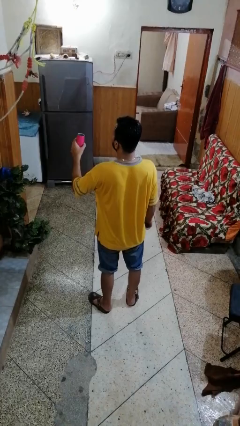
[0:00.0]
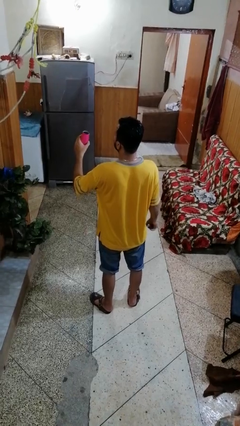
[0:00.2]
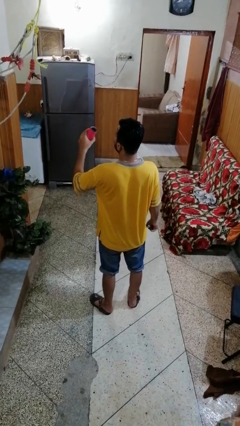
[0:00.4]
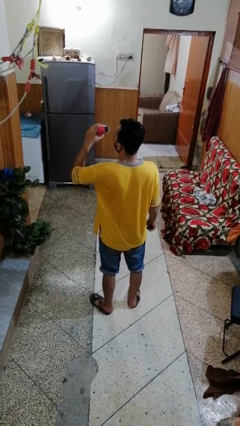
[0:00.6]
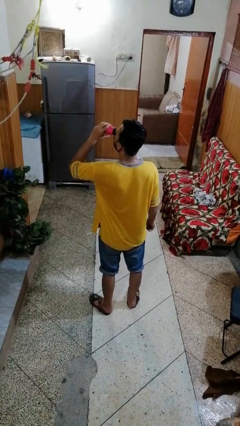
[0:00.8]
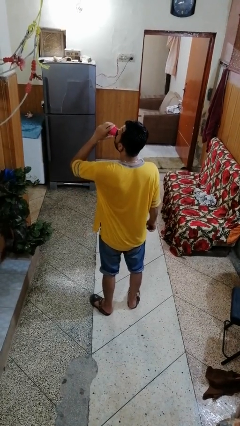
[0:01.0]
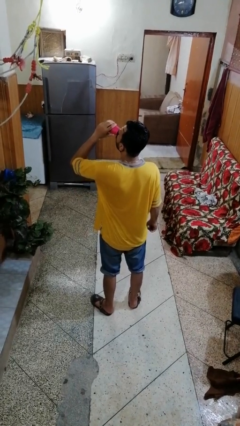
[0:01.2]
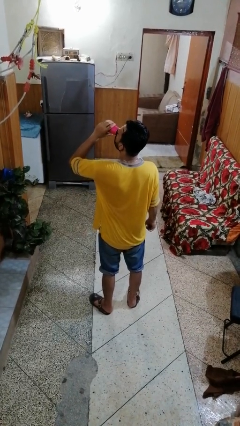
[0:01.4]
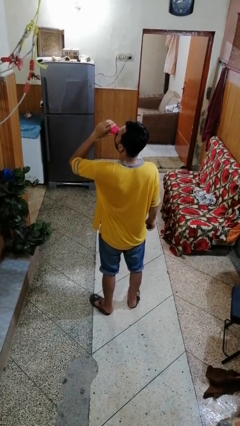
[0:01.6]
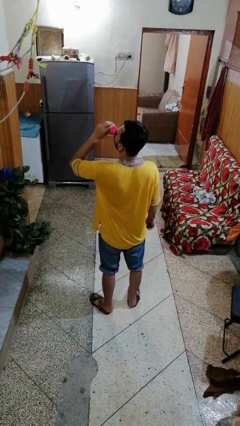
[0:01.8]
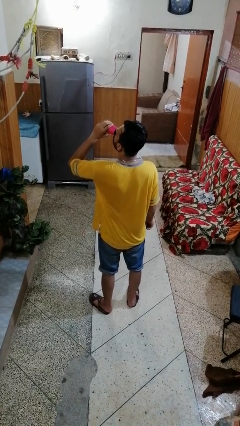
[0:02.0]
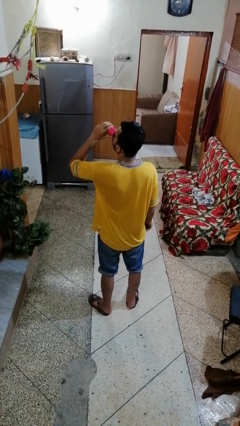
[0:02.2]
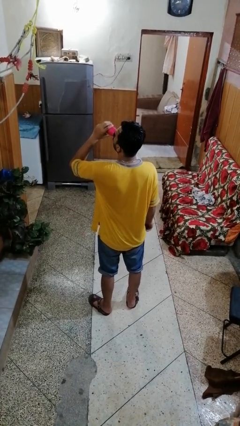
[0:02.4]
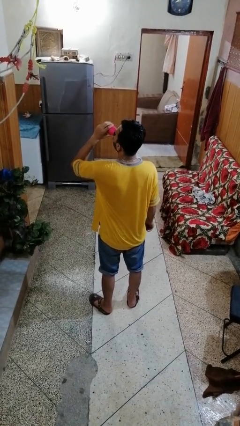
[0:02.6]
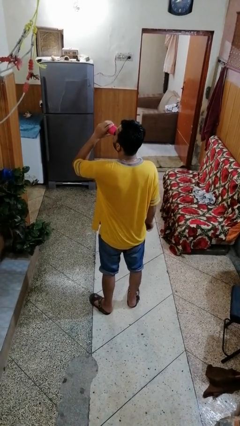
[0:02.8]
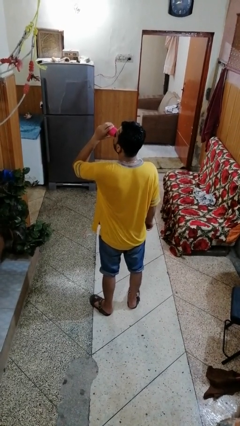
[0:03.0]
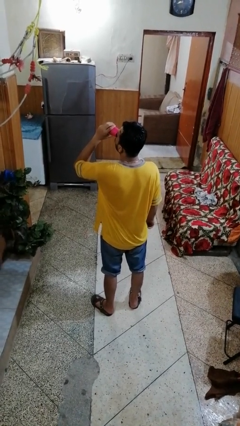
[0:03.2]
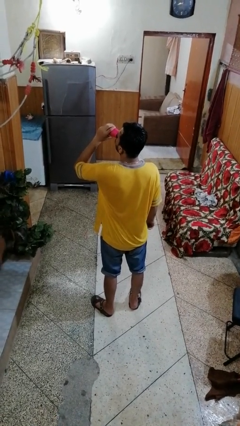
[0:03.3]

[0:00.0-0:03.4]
person drinks from beverage can

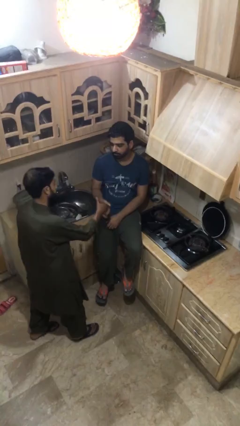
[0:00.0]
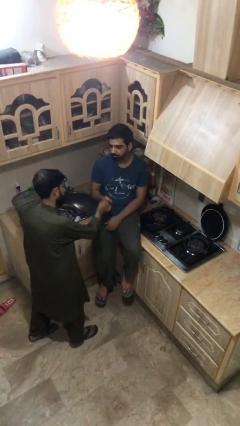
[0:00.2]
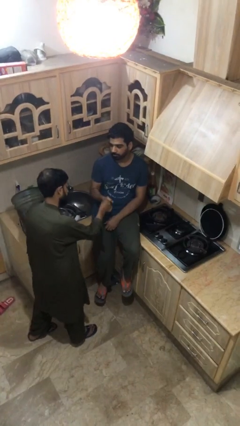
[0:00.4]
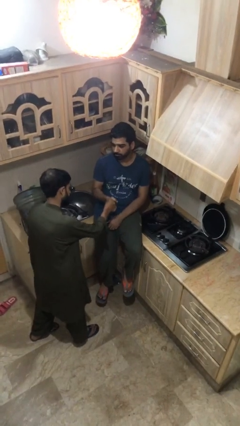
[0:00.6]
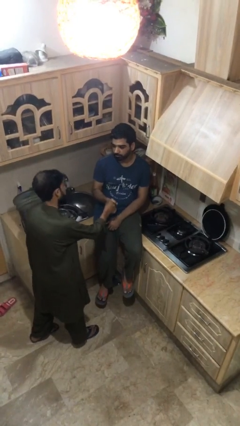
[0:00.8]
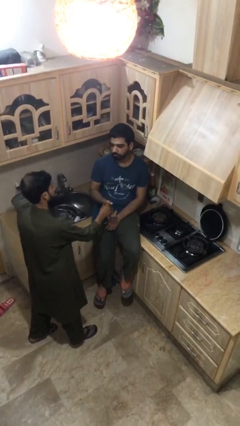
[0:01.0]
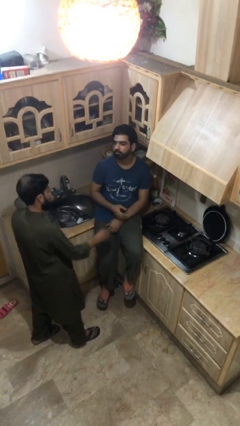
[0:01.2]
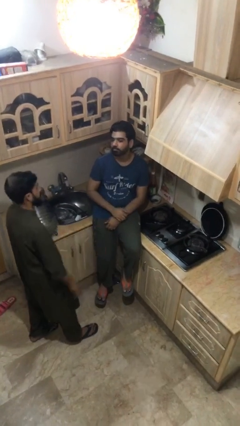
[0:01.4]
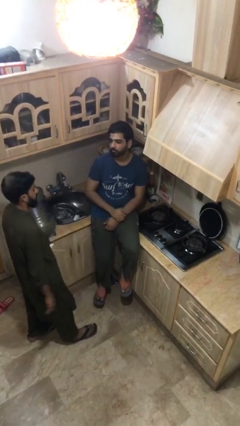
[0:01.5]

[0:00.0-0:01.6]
person shakes hand

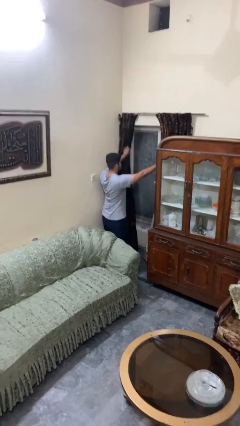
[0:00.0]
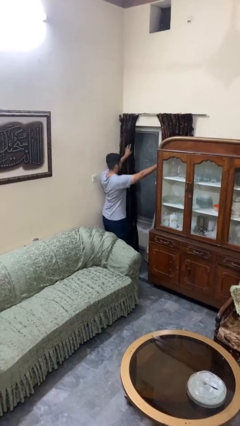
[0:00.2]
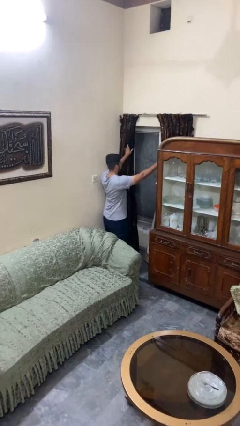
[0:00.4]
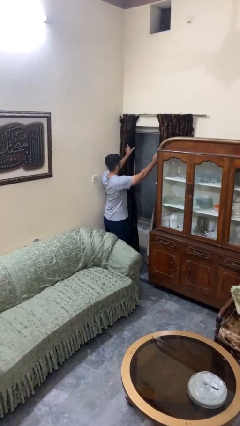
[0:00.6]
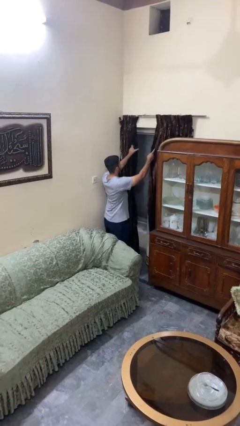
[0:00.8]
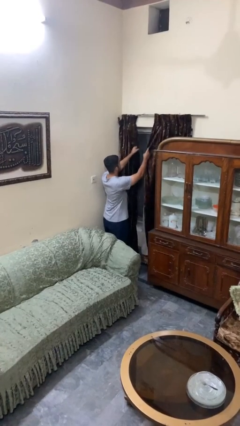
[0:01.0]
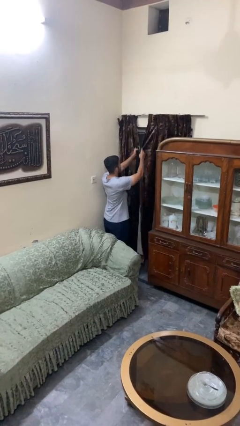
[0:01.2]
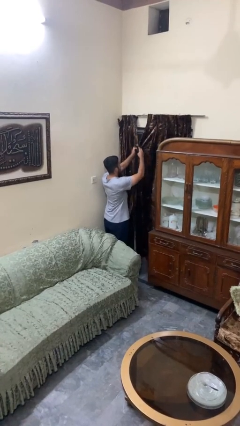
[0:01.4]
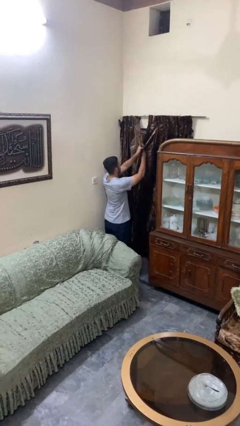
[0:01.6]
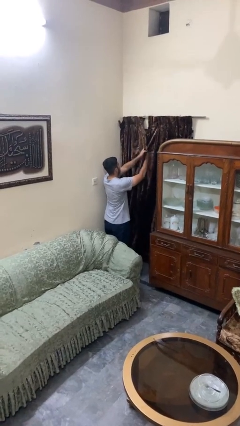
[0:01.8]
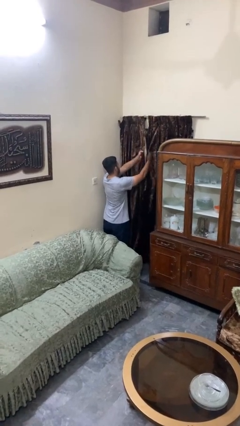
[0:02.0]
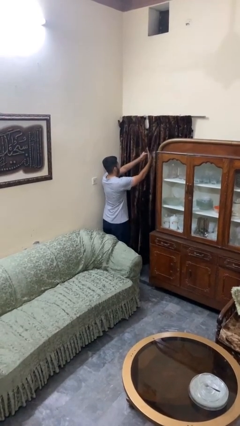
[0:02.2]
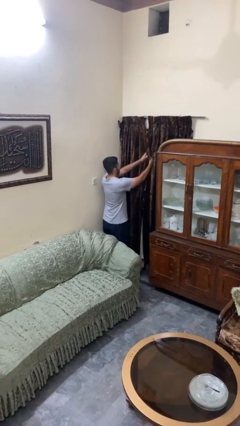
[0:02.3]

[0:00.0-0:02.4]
person closes curtains

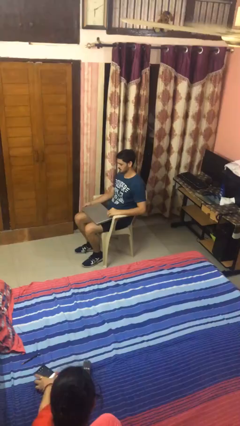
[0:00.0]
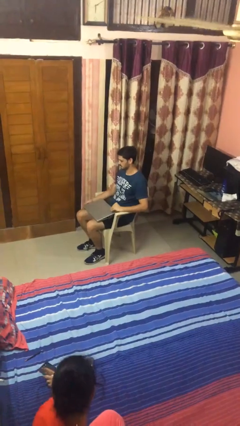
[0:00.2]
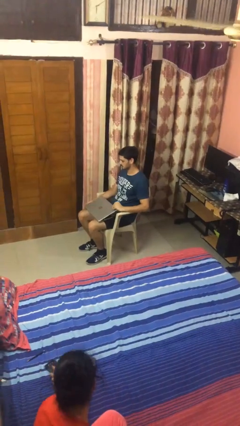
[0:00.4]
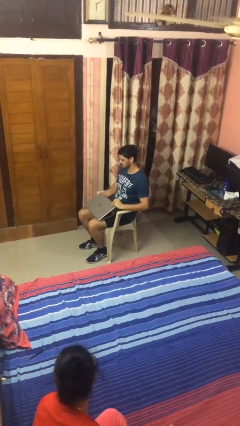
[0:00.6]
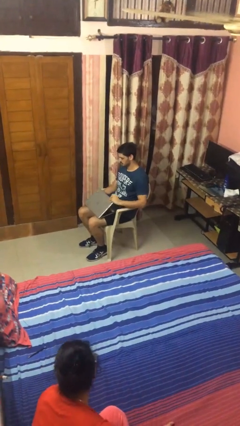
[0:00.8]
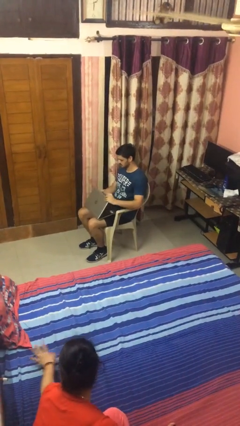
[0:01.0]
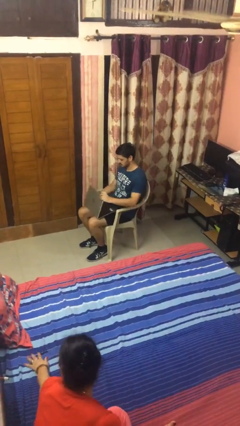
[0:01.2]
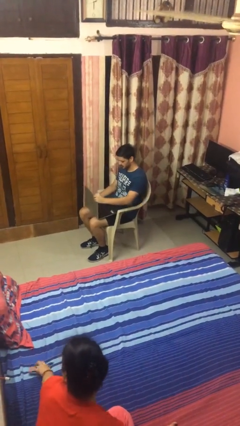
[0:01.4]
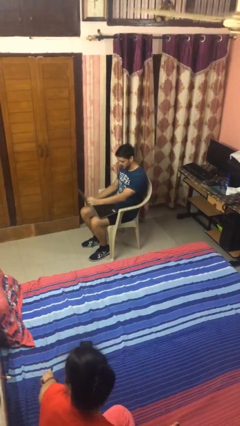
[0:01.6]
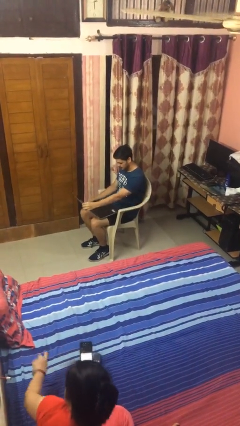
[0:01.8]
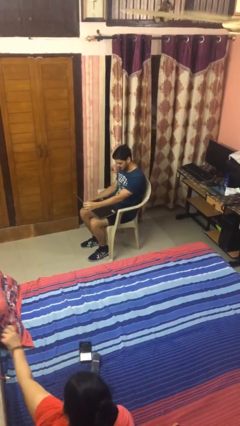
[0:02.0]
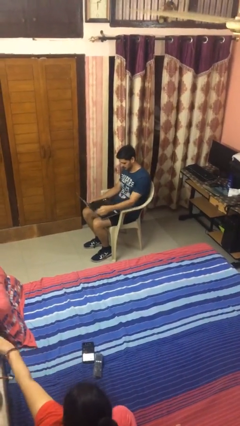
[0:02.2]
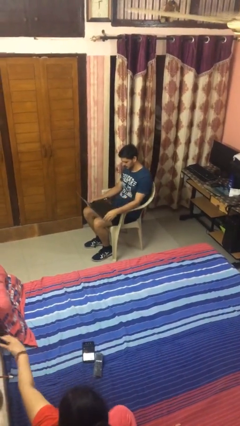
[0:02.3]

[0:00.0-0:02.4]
person opens laptop

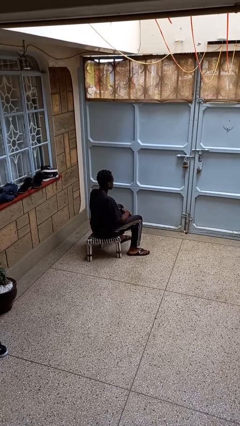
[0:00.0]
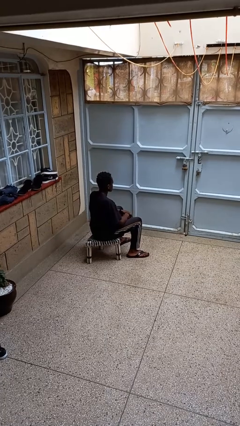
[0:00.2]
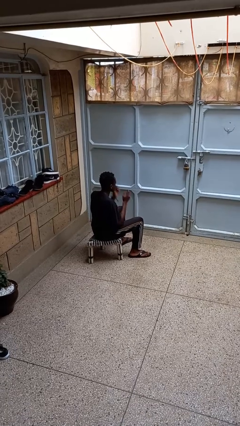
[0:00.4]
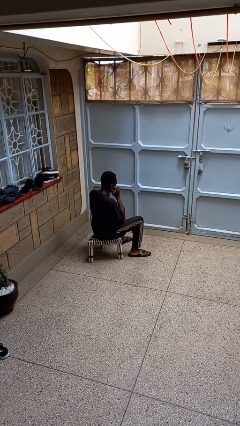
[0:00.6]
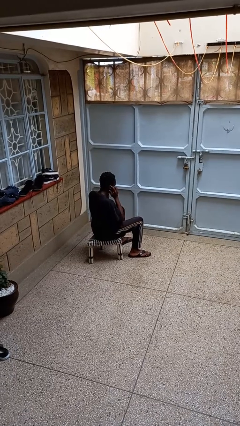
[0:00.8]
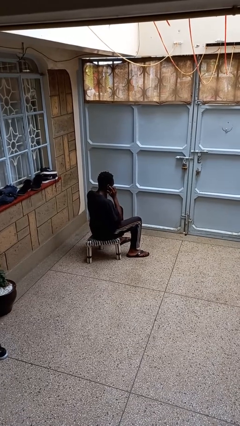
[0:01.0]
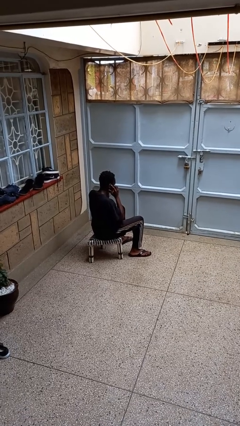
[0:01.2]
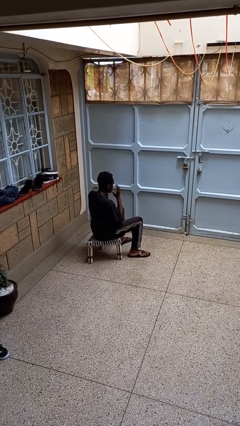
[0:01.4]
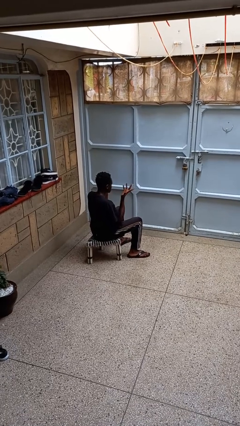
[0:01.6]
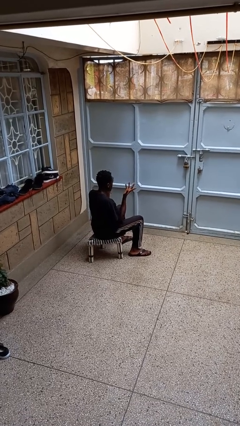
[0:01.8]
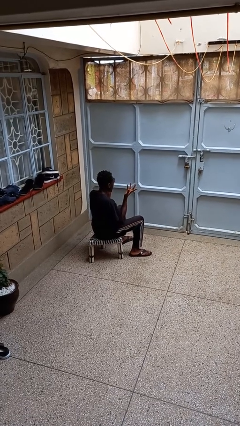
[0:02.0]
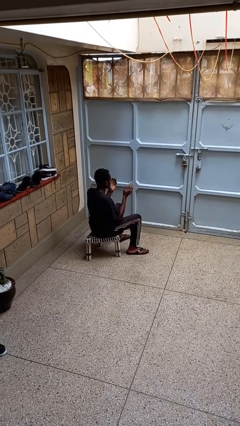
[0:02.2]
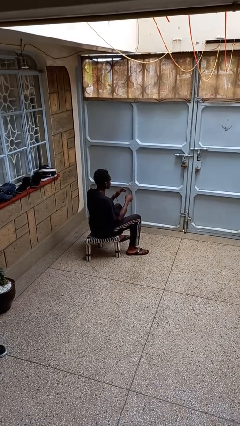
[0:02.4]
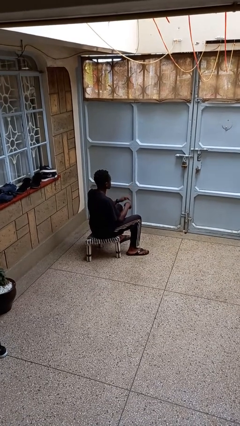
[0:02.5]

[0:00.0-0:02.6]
person puts fingers in ear

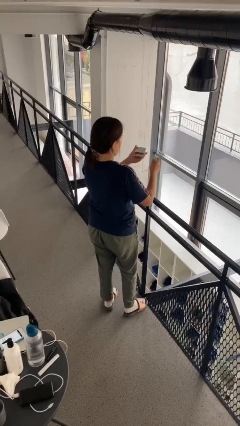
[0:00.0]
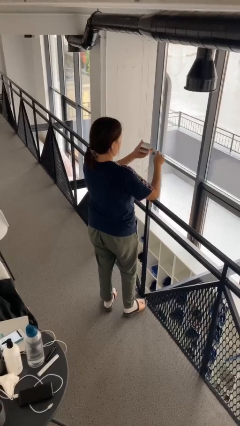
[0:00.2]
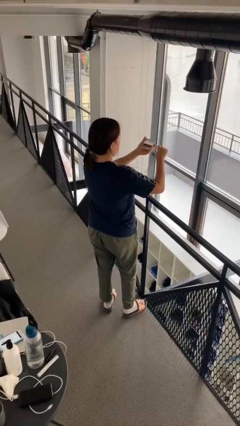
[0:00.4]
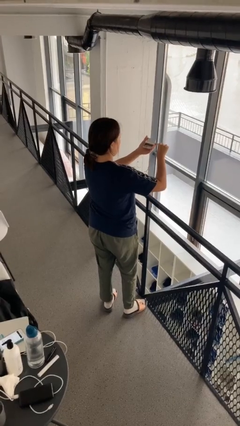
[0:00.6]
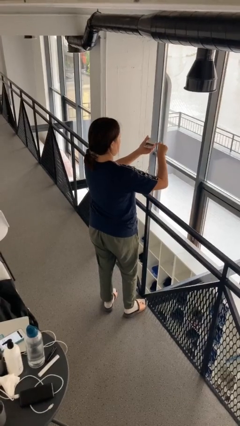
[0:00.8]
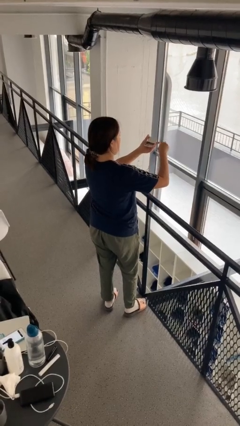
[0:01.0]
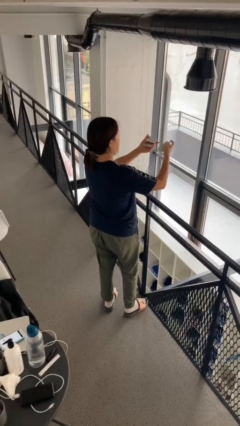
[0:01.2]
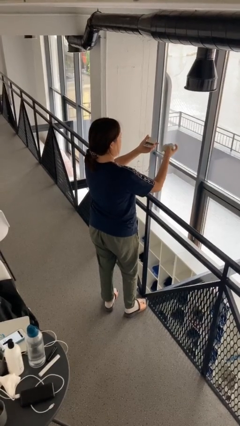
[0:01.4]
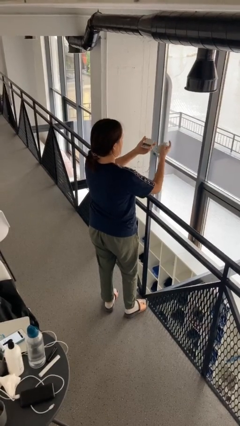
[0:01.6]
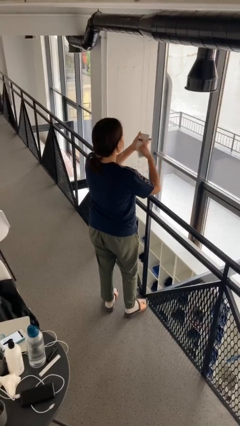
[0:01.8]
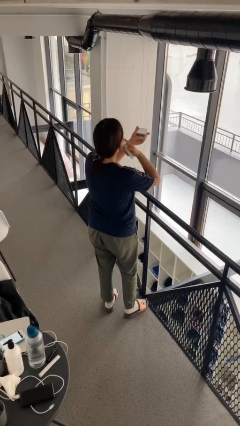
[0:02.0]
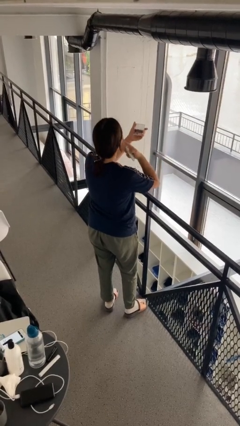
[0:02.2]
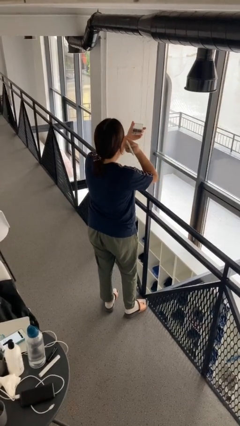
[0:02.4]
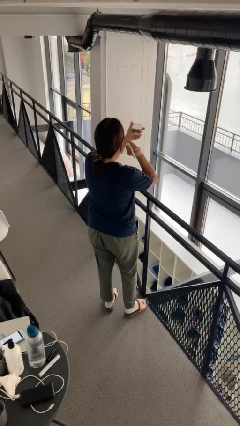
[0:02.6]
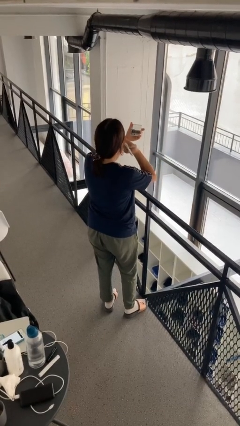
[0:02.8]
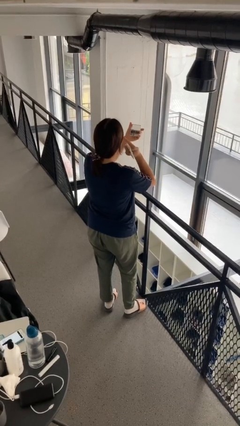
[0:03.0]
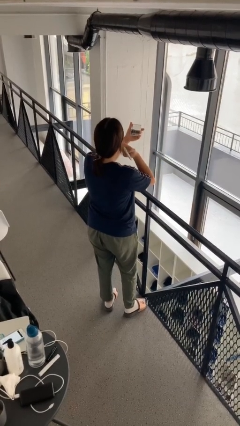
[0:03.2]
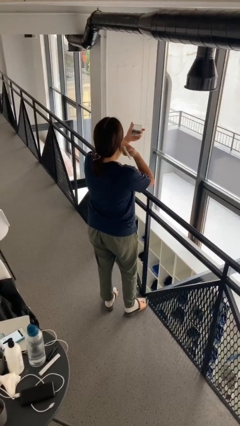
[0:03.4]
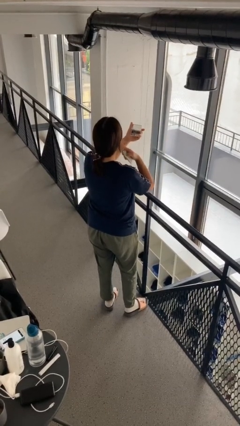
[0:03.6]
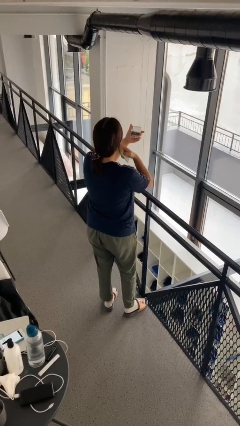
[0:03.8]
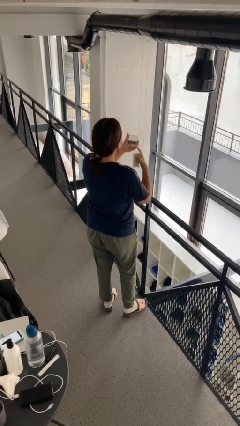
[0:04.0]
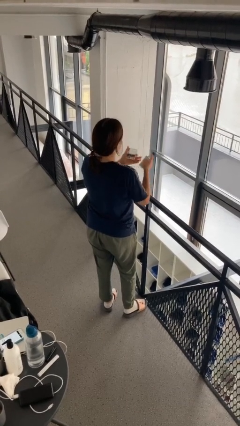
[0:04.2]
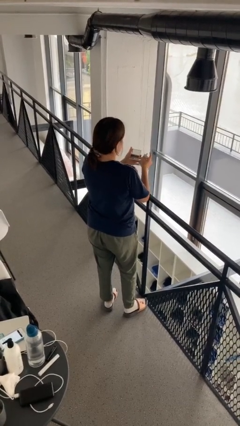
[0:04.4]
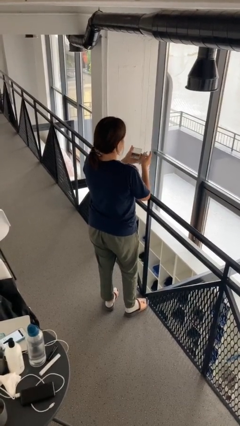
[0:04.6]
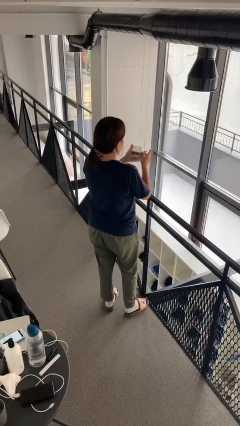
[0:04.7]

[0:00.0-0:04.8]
person applies foundation makeup
